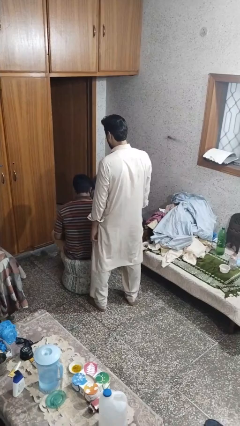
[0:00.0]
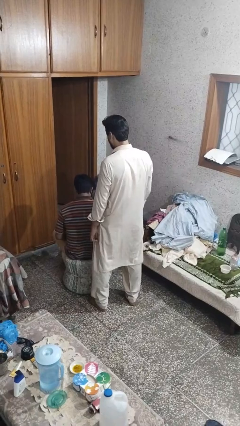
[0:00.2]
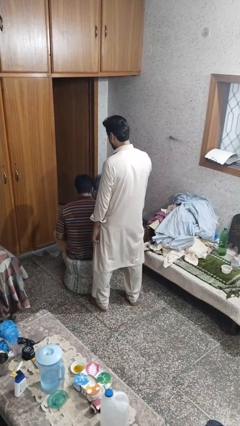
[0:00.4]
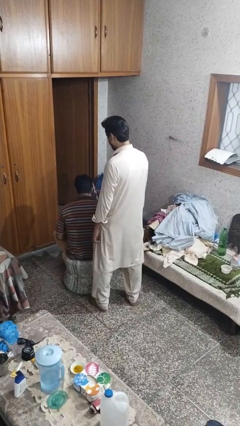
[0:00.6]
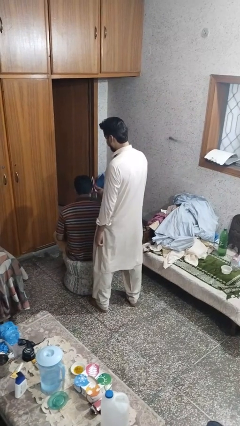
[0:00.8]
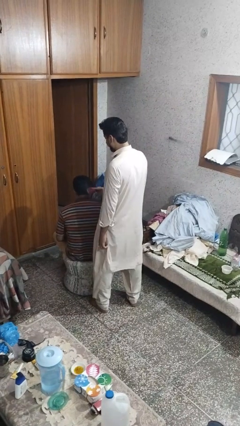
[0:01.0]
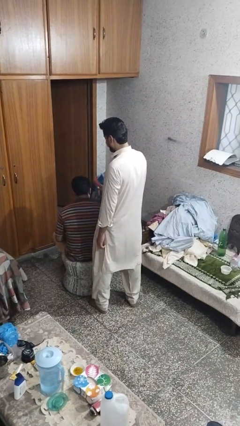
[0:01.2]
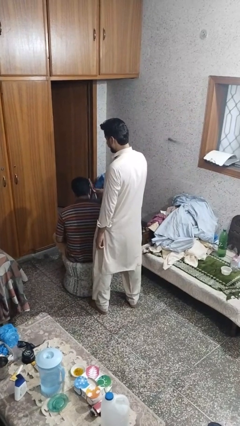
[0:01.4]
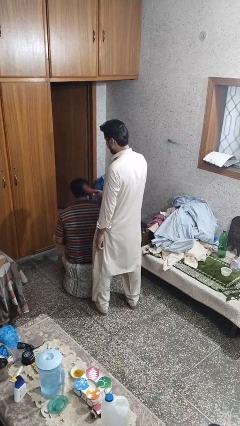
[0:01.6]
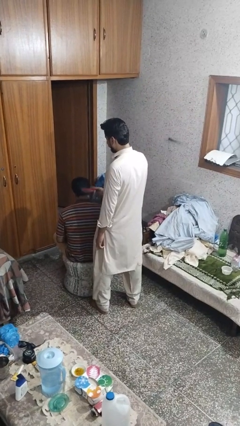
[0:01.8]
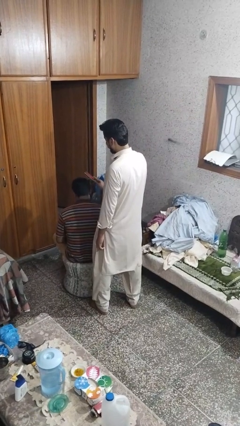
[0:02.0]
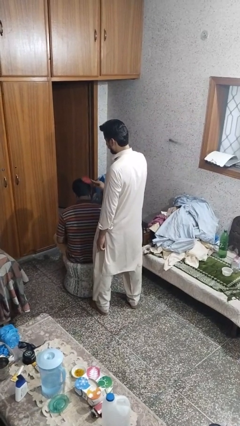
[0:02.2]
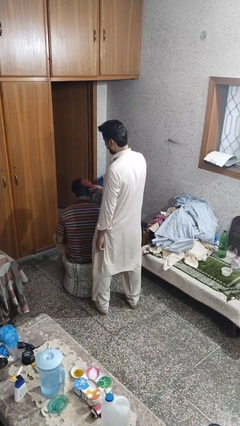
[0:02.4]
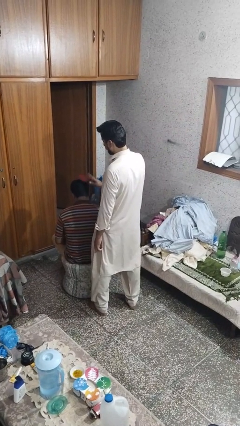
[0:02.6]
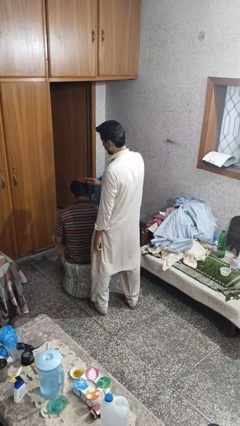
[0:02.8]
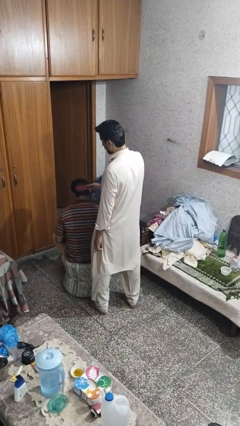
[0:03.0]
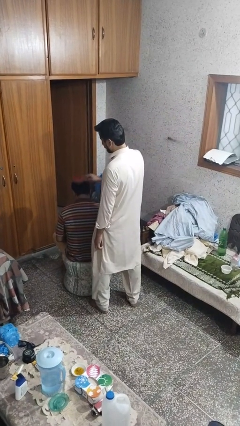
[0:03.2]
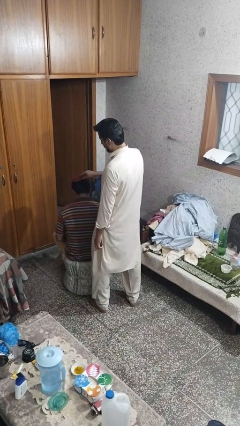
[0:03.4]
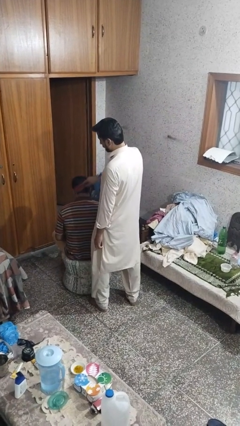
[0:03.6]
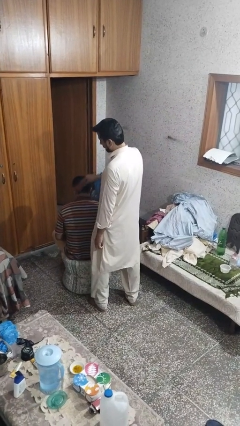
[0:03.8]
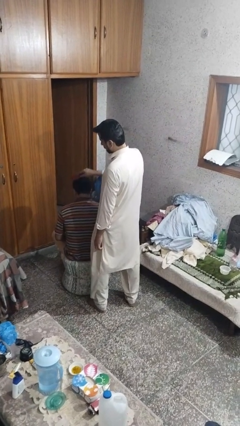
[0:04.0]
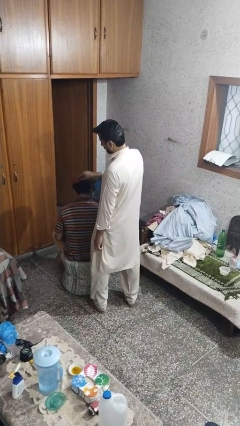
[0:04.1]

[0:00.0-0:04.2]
person brushes hair of person

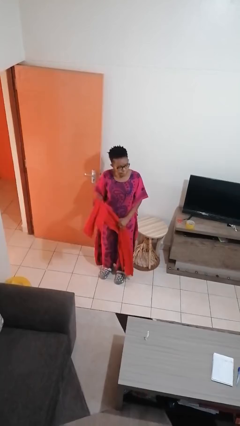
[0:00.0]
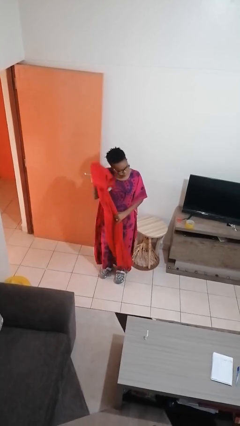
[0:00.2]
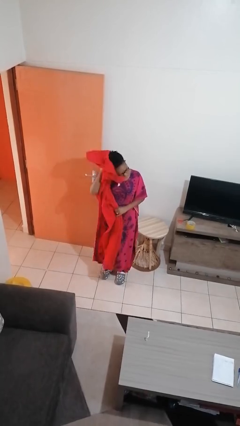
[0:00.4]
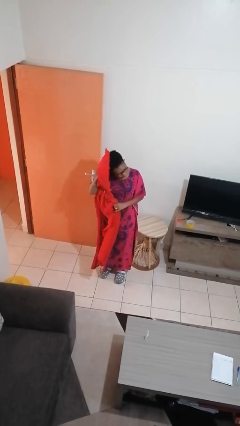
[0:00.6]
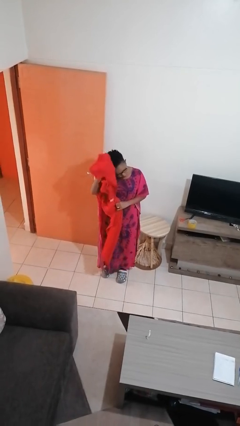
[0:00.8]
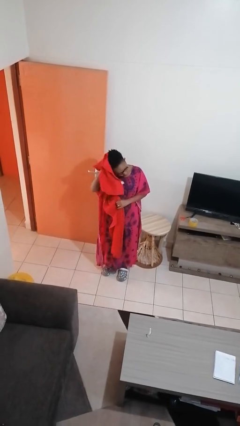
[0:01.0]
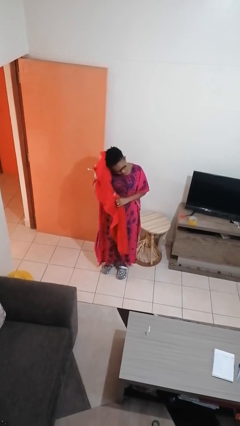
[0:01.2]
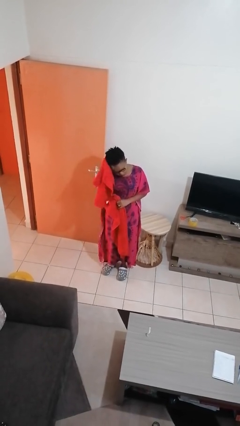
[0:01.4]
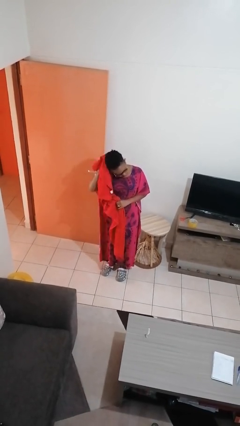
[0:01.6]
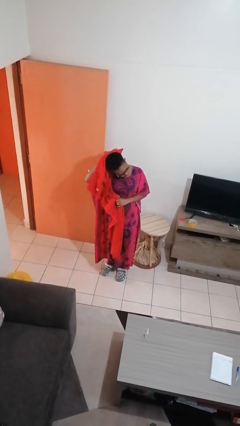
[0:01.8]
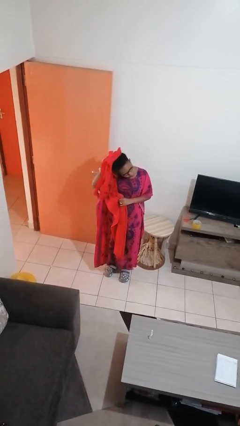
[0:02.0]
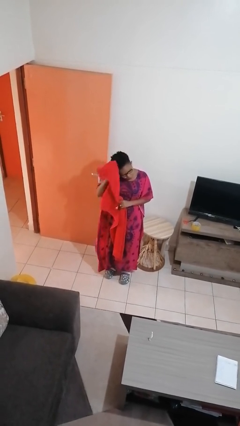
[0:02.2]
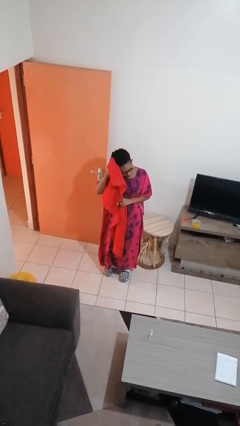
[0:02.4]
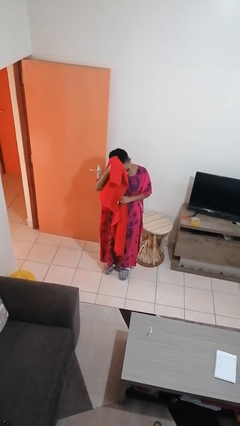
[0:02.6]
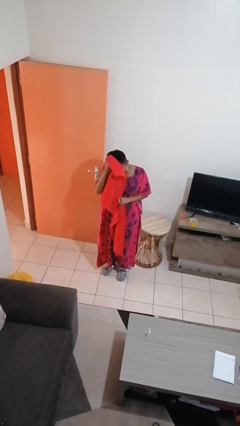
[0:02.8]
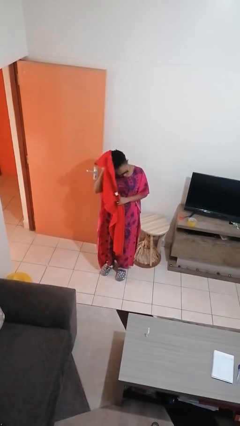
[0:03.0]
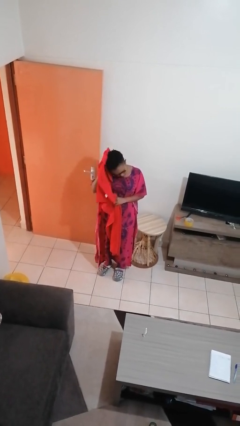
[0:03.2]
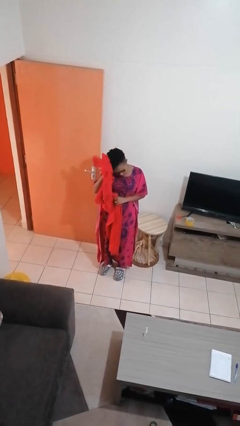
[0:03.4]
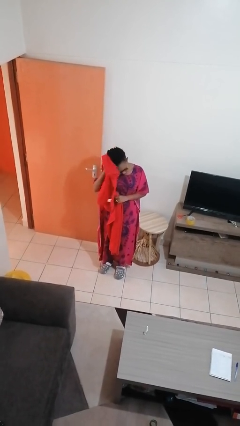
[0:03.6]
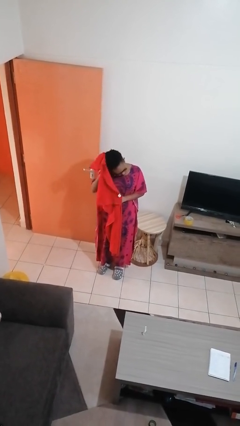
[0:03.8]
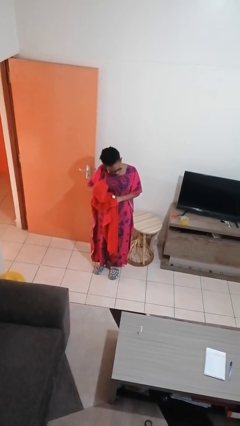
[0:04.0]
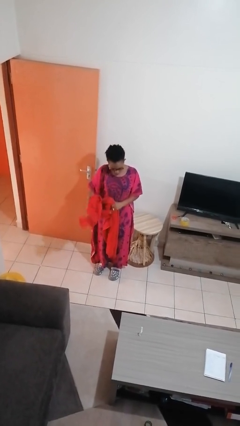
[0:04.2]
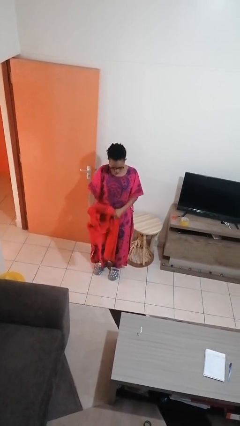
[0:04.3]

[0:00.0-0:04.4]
person dries hair with towel

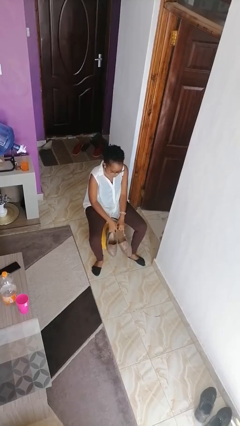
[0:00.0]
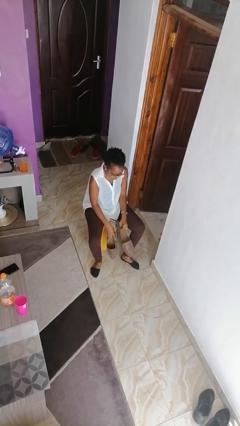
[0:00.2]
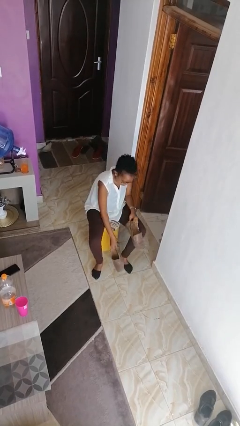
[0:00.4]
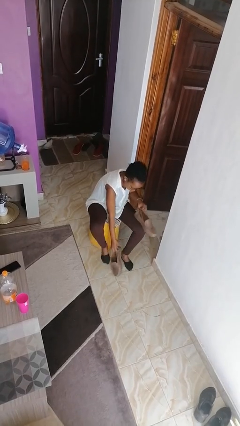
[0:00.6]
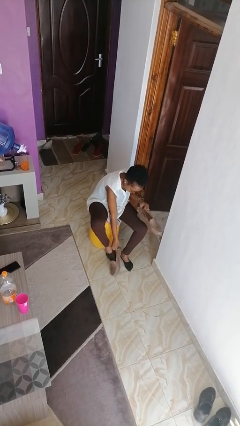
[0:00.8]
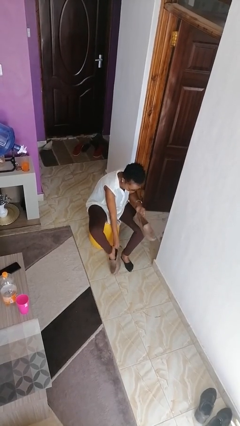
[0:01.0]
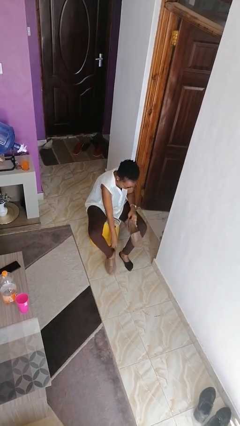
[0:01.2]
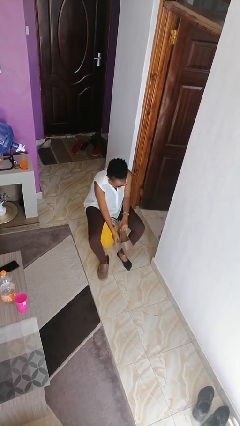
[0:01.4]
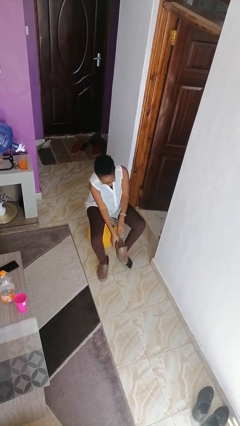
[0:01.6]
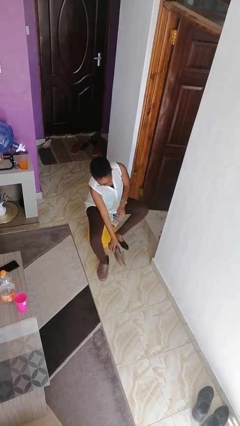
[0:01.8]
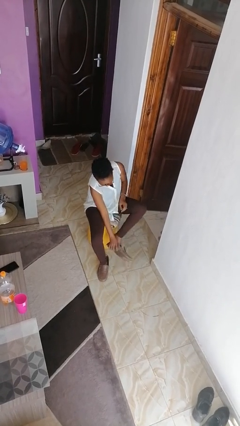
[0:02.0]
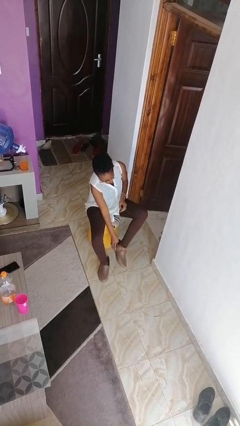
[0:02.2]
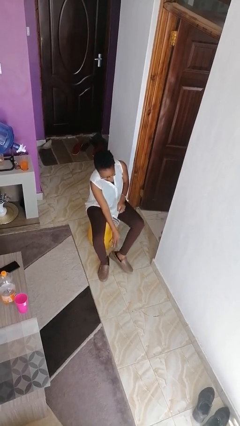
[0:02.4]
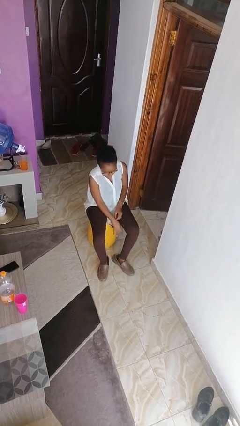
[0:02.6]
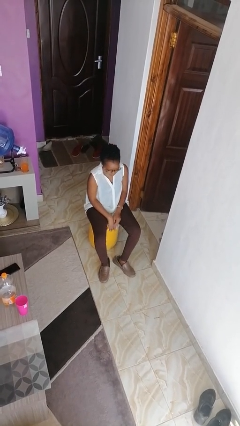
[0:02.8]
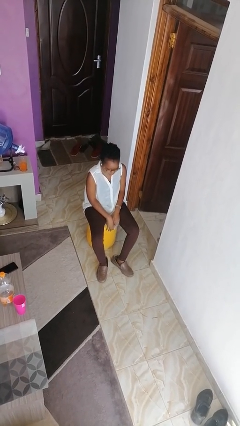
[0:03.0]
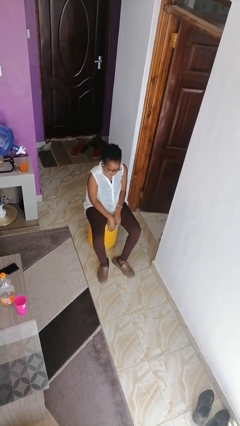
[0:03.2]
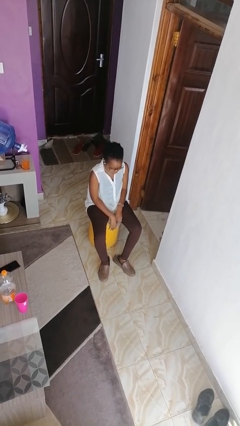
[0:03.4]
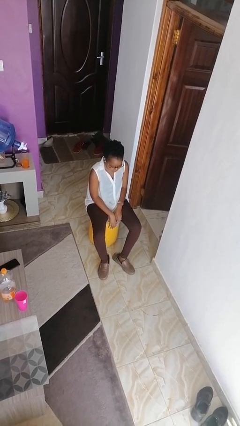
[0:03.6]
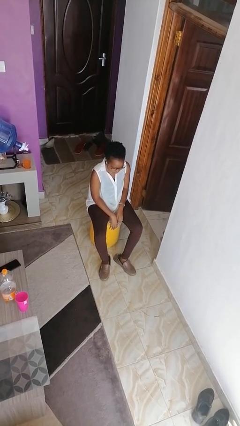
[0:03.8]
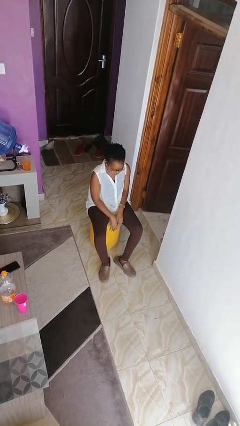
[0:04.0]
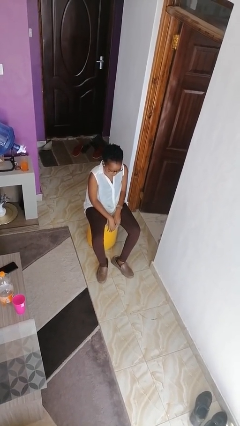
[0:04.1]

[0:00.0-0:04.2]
person puts on shoes

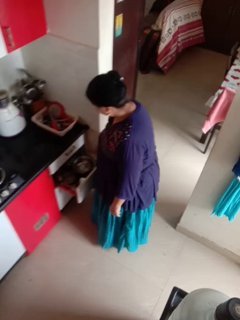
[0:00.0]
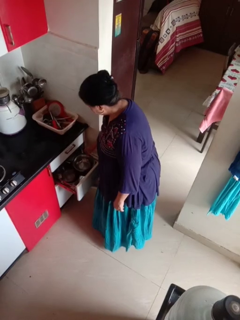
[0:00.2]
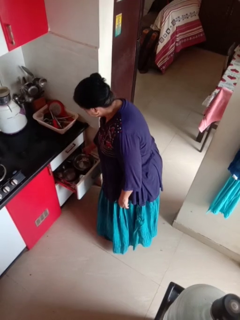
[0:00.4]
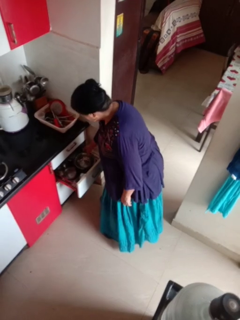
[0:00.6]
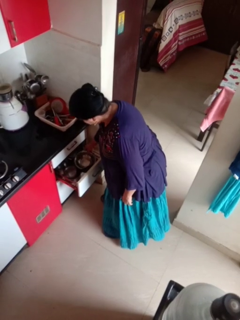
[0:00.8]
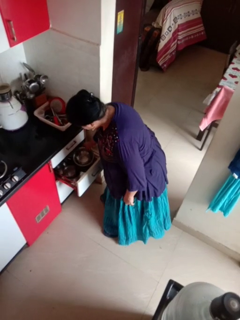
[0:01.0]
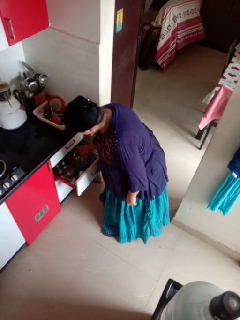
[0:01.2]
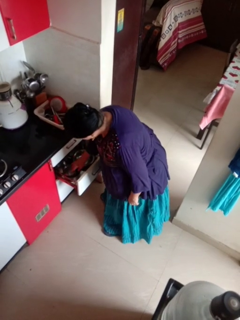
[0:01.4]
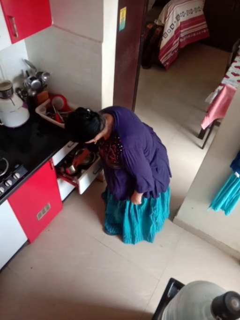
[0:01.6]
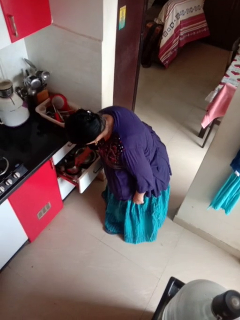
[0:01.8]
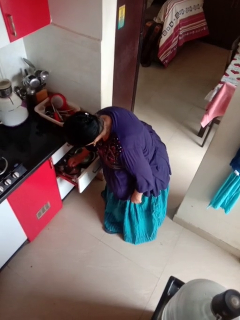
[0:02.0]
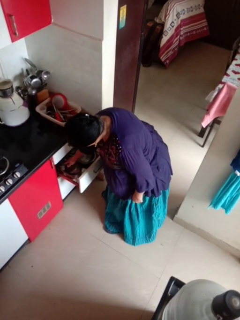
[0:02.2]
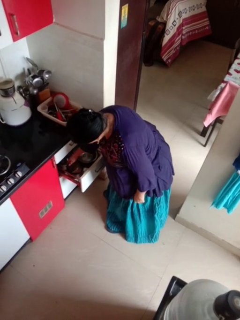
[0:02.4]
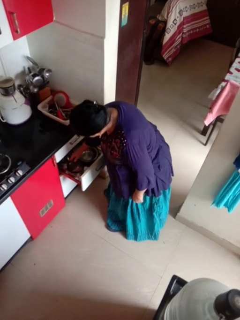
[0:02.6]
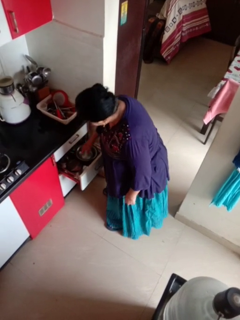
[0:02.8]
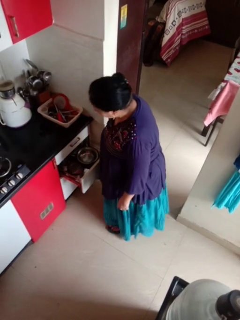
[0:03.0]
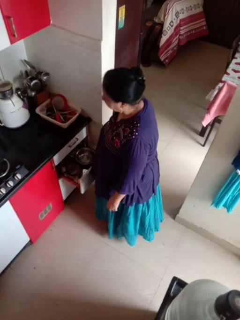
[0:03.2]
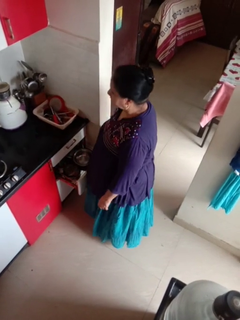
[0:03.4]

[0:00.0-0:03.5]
person searches in kitchen drawer

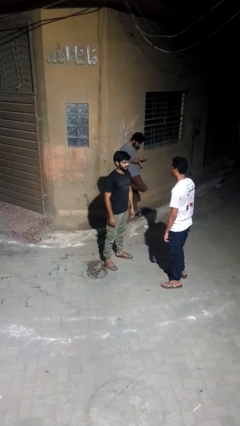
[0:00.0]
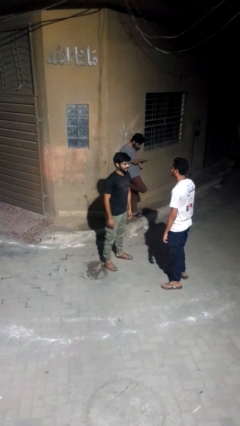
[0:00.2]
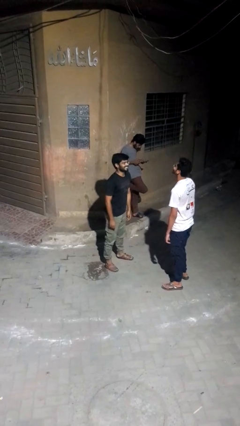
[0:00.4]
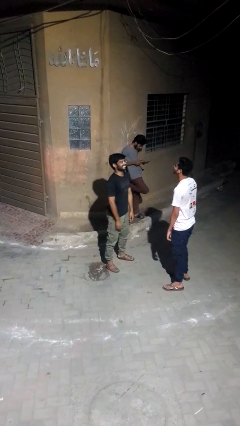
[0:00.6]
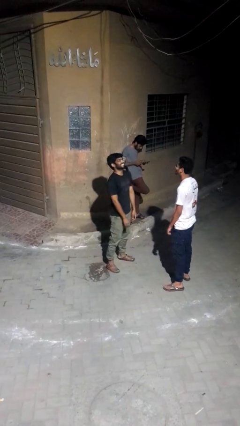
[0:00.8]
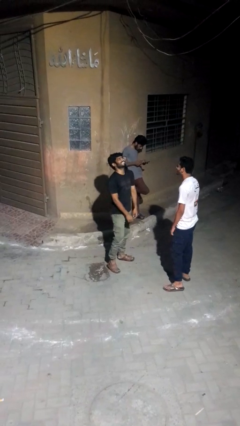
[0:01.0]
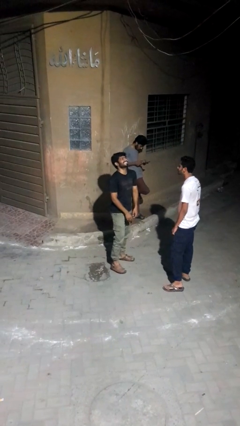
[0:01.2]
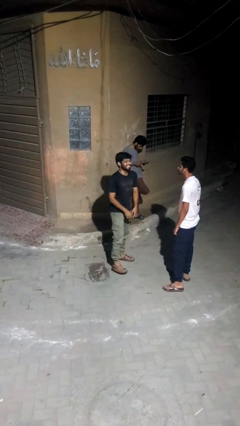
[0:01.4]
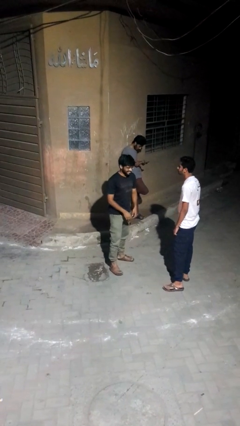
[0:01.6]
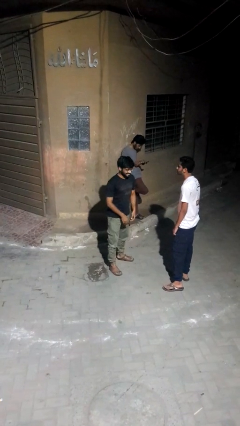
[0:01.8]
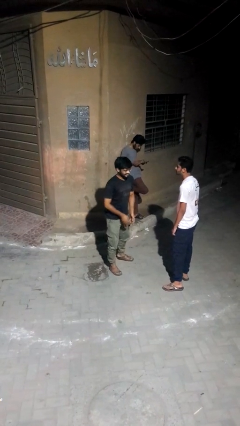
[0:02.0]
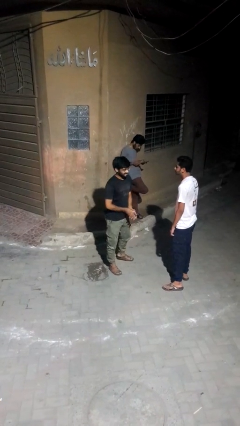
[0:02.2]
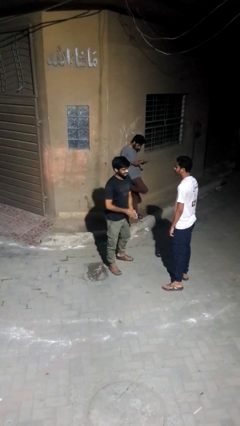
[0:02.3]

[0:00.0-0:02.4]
person laughs with person
